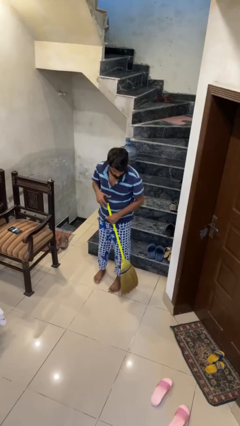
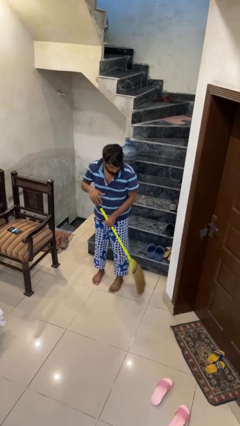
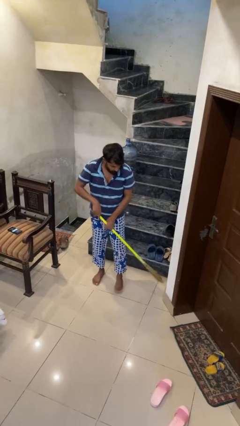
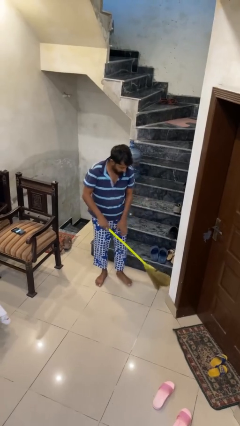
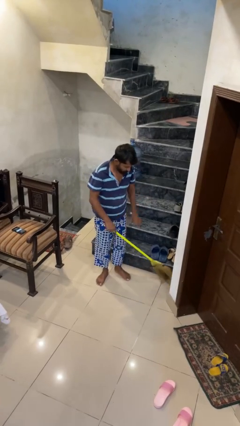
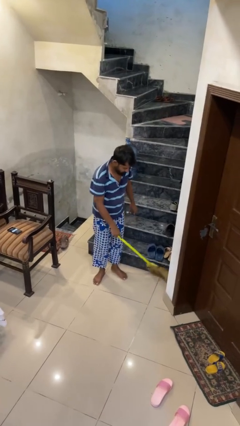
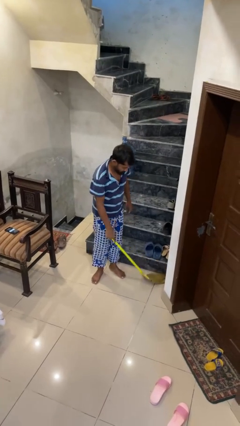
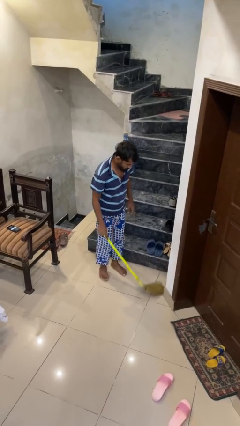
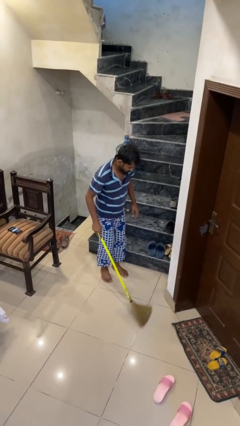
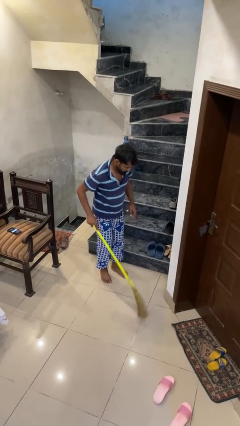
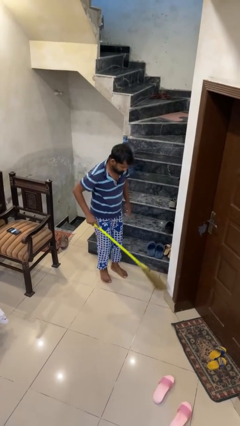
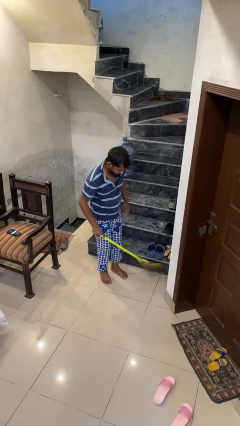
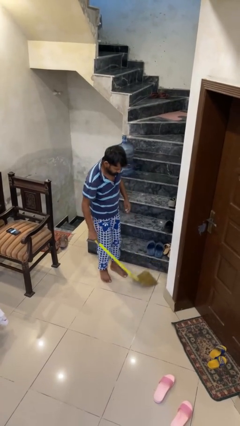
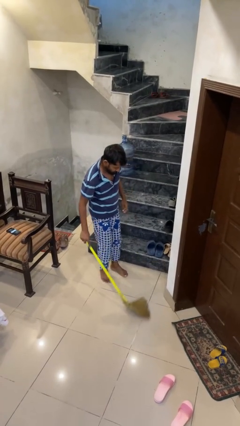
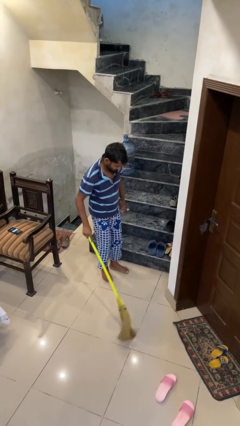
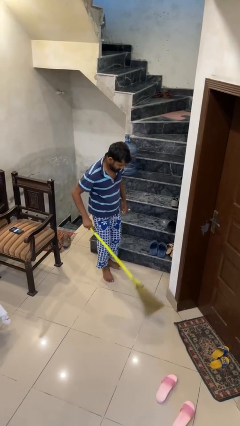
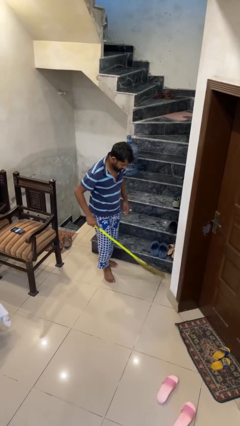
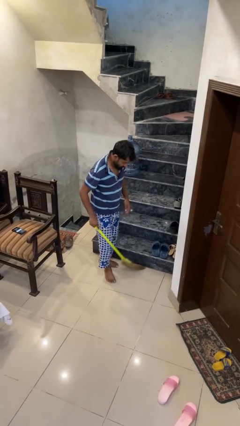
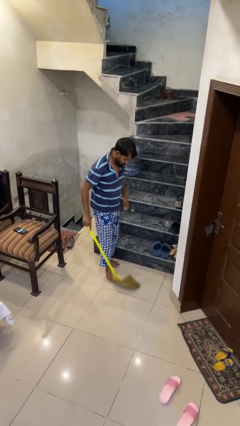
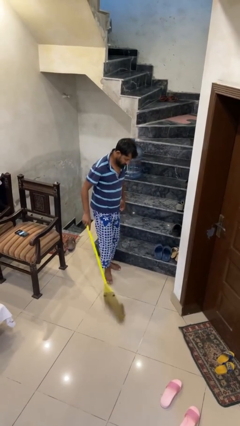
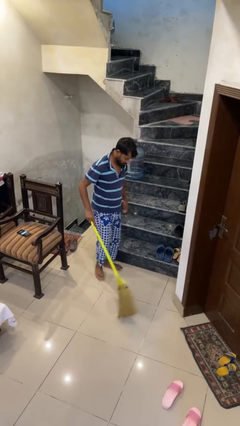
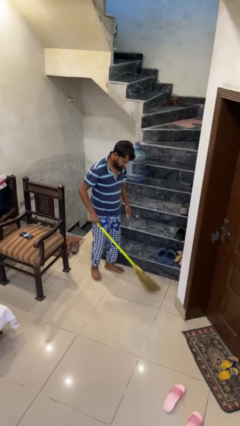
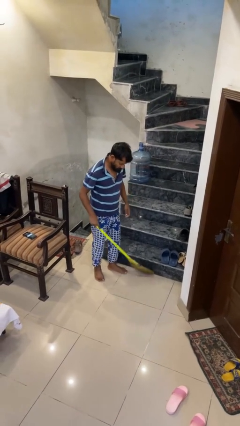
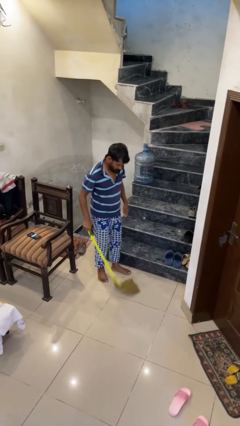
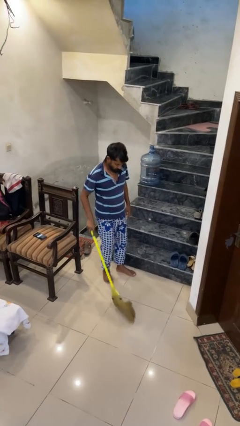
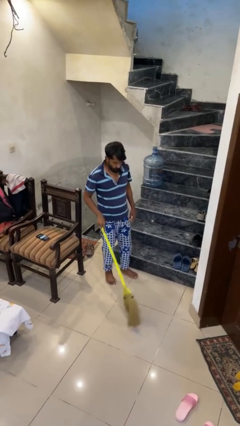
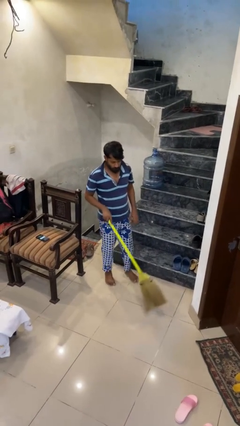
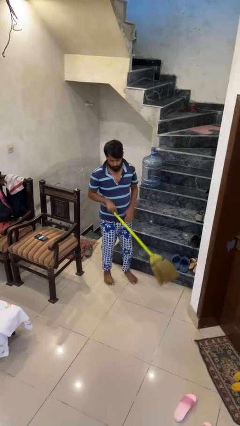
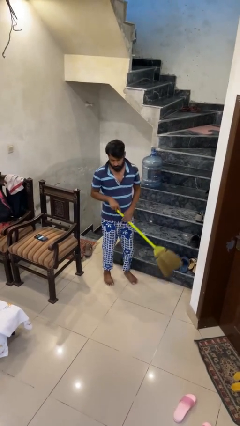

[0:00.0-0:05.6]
person sweeps floor

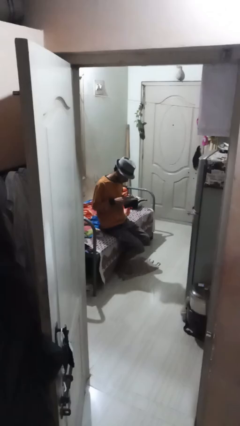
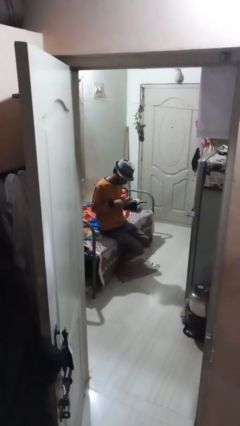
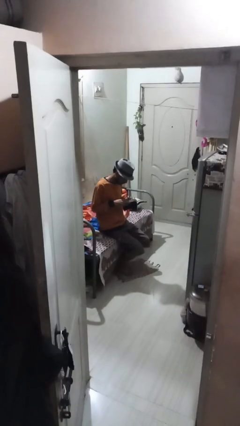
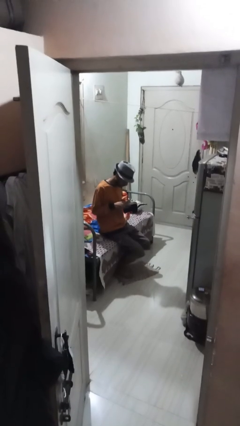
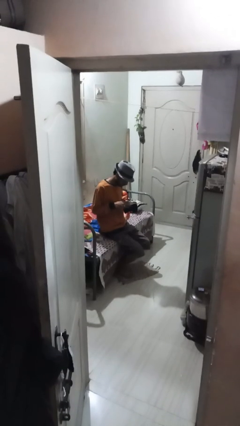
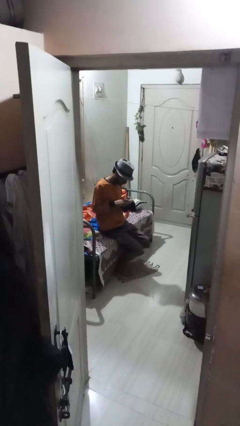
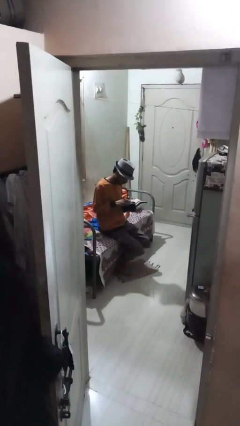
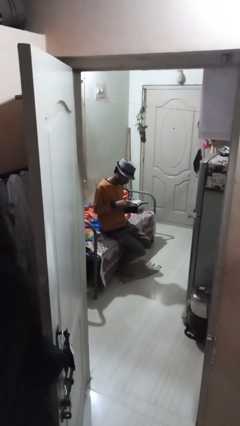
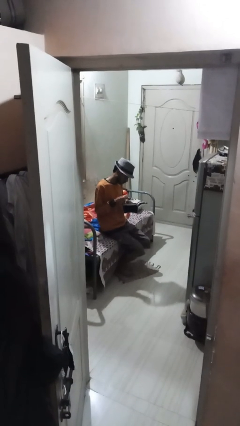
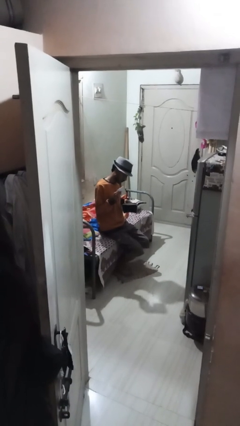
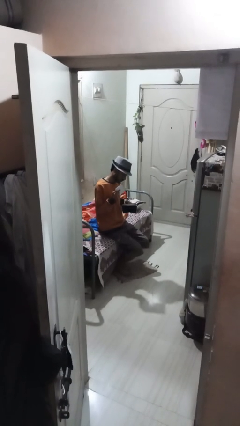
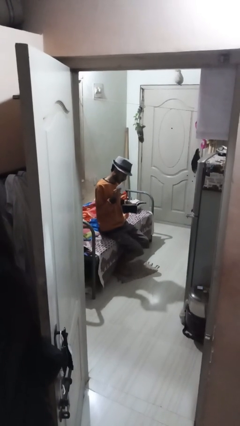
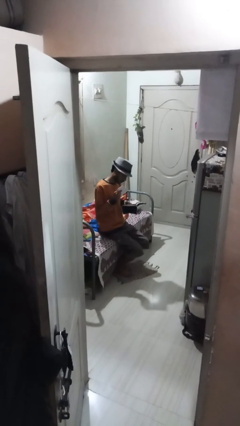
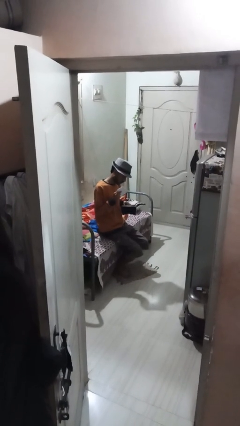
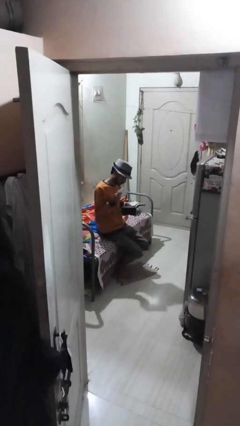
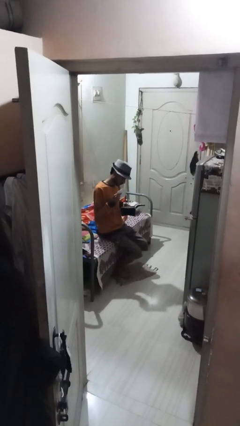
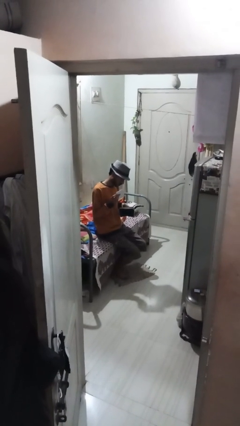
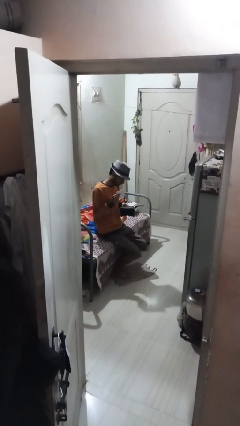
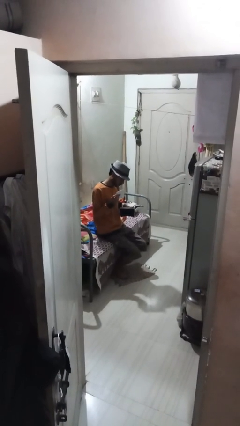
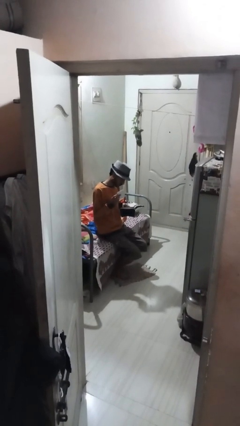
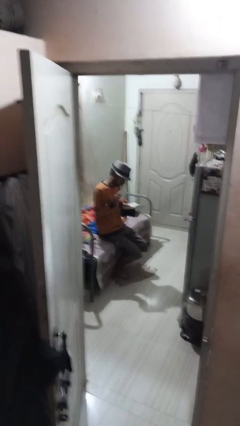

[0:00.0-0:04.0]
person takes object from purse

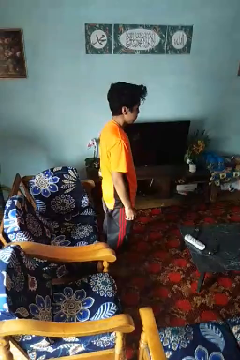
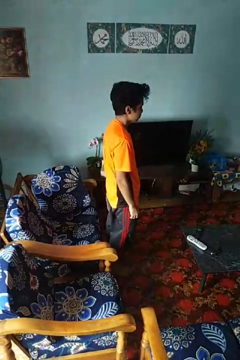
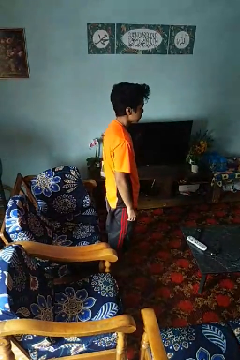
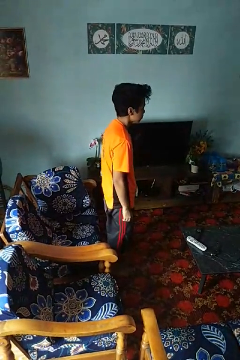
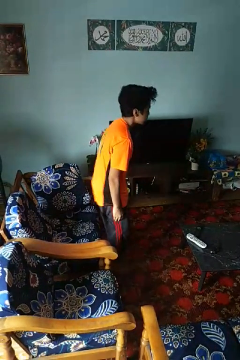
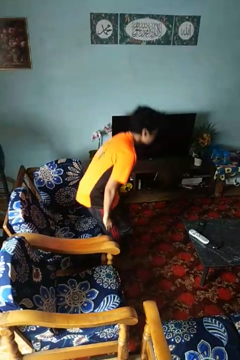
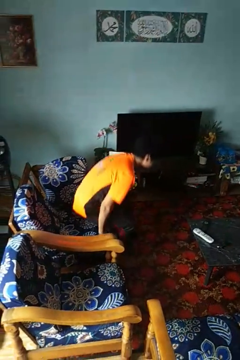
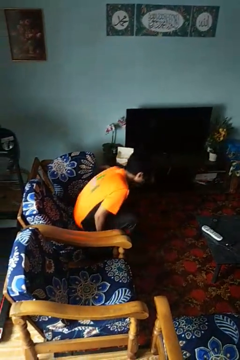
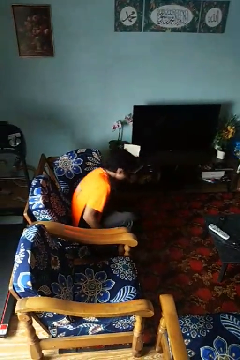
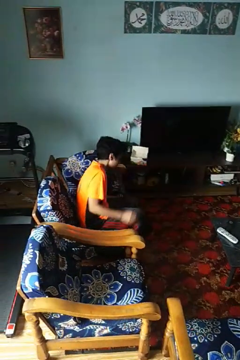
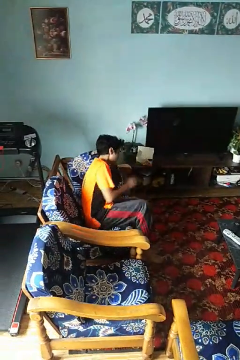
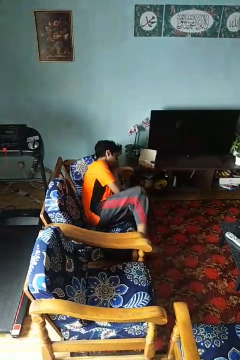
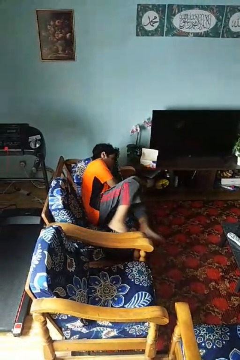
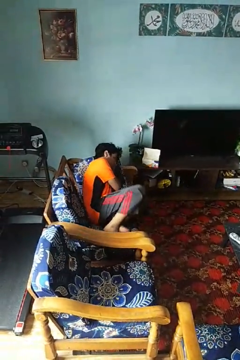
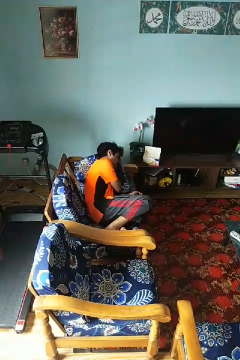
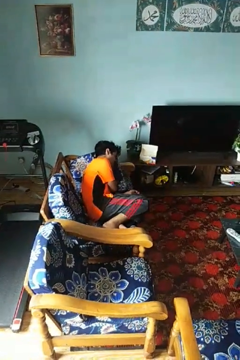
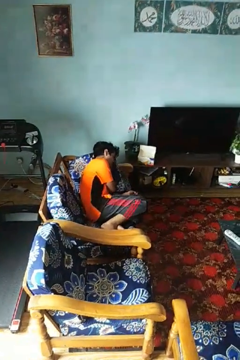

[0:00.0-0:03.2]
person lies down on couch

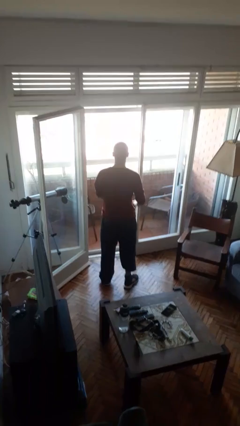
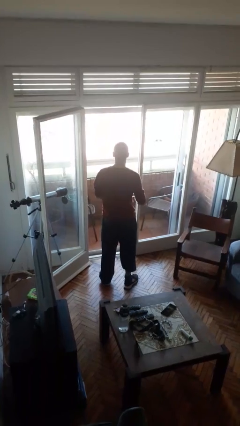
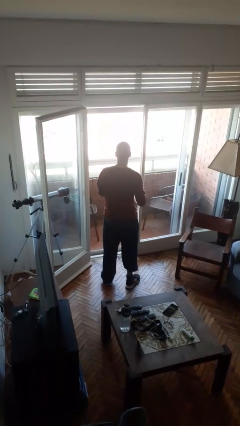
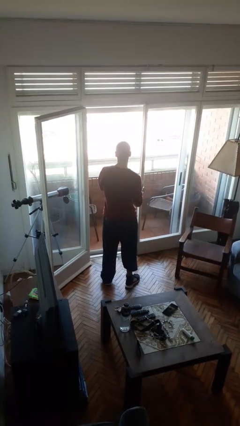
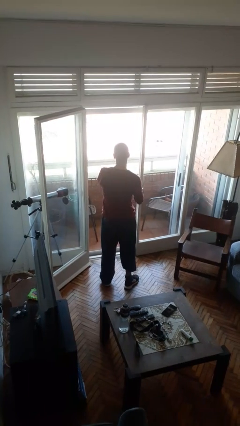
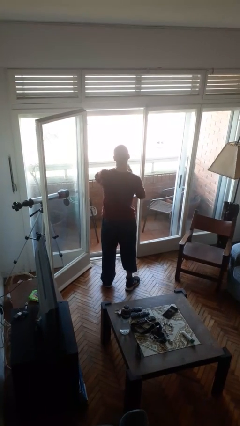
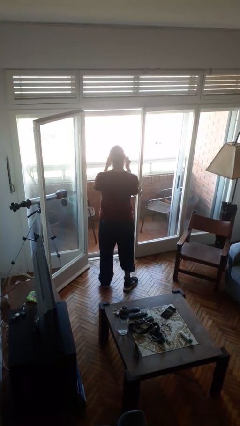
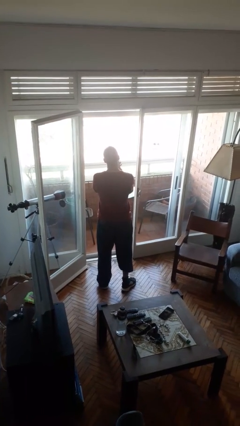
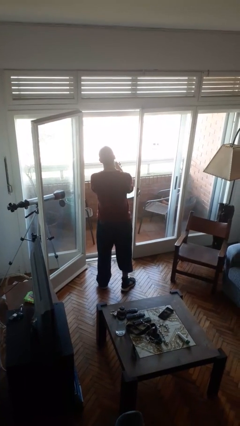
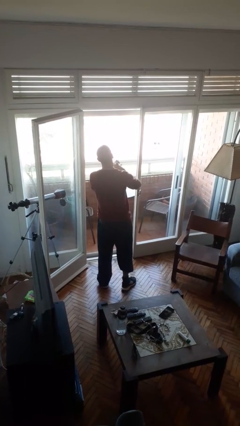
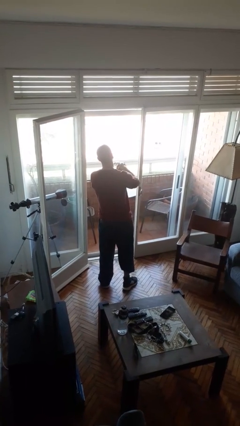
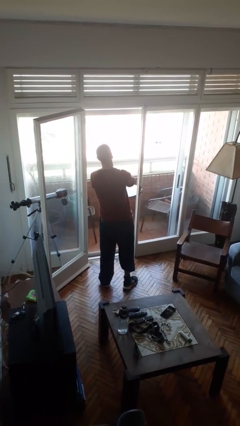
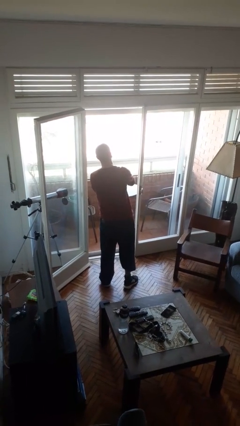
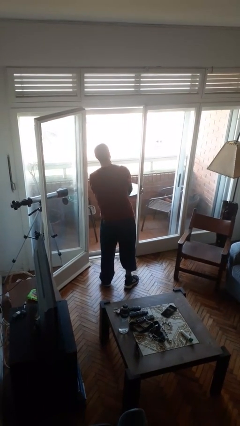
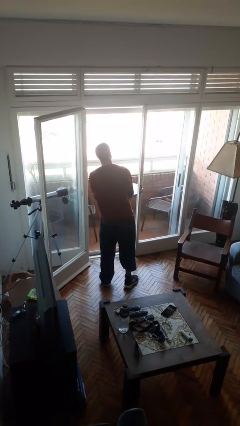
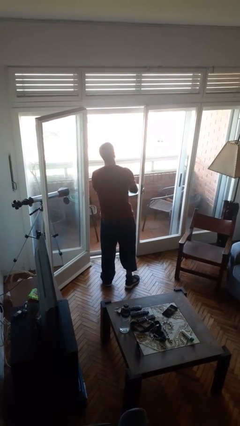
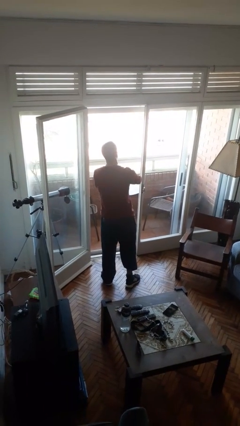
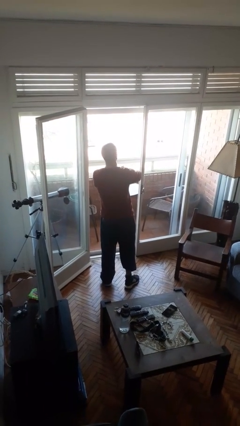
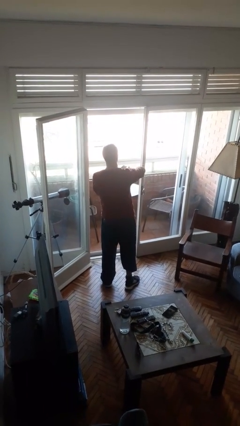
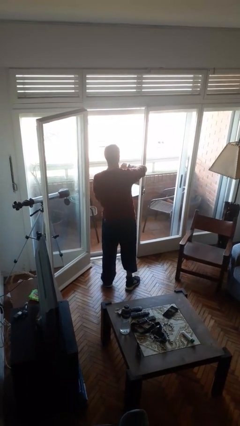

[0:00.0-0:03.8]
person puts on wristwatch

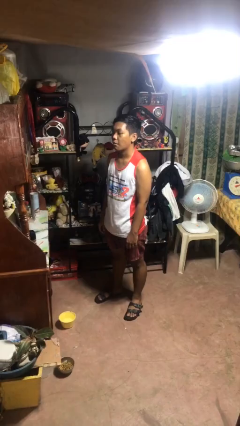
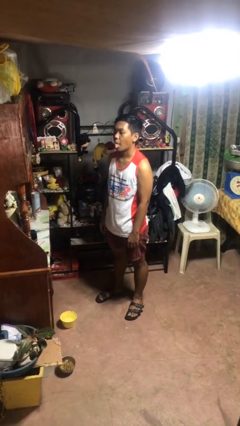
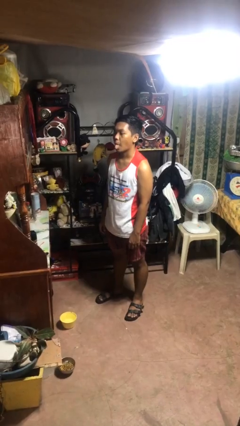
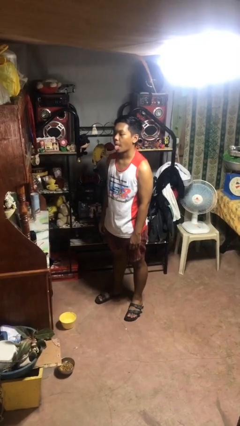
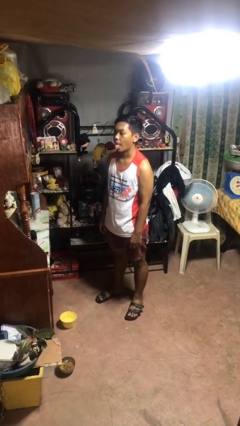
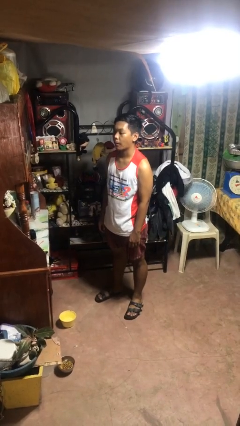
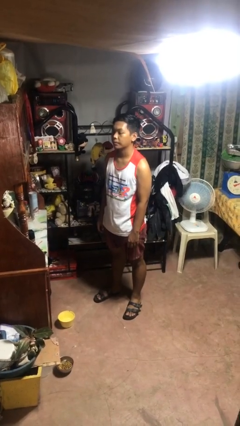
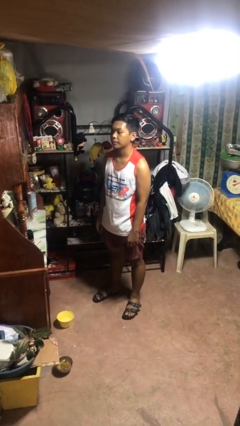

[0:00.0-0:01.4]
person sticks out tongue
